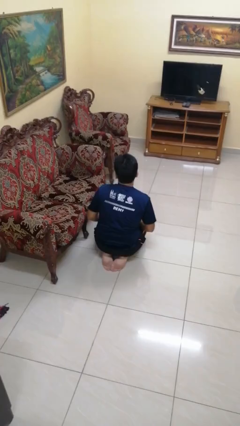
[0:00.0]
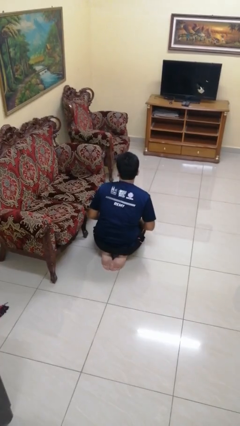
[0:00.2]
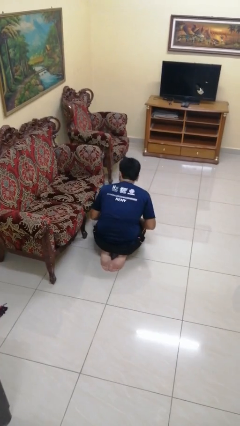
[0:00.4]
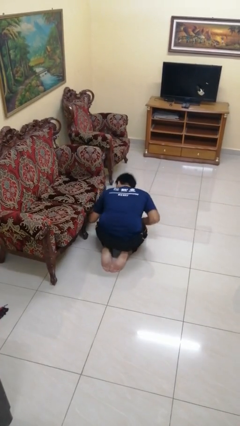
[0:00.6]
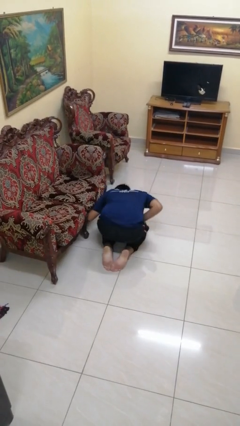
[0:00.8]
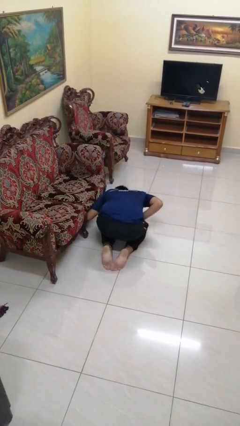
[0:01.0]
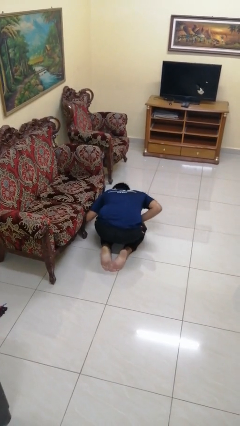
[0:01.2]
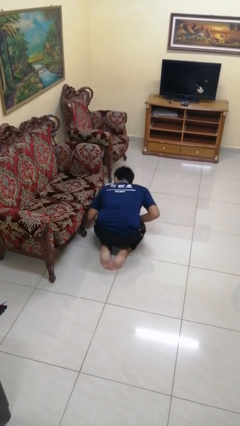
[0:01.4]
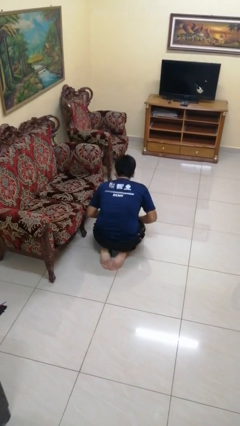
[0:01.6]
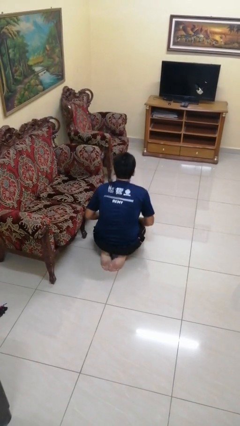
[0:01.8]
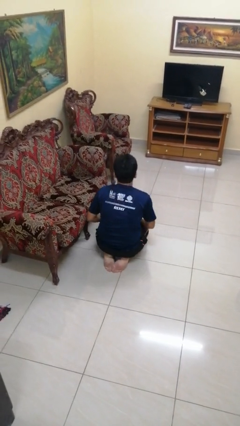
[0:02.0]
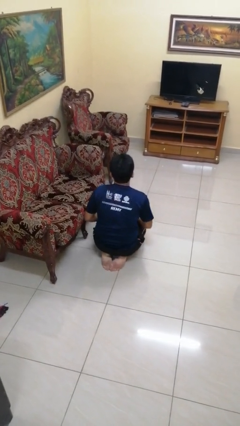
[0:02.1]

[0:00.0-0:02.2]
person searches under couch

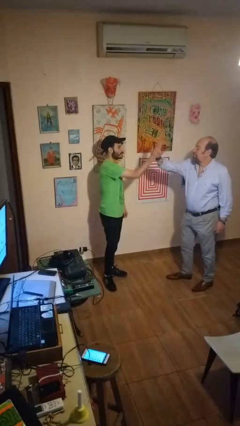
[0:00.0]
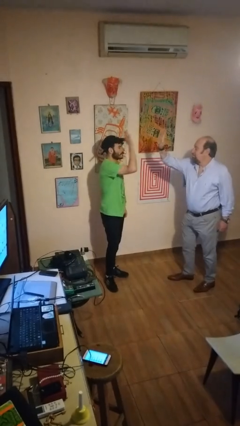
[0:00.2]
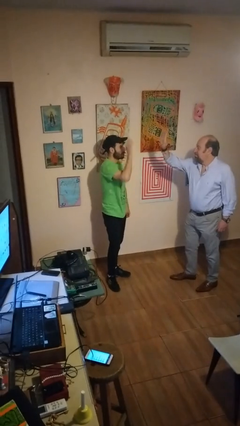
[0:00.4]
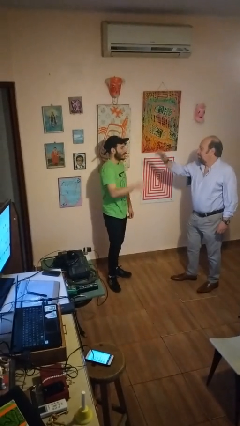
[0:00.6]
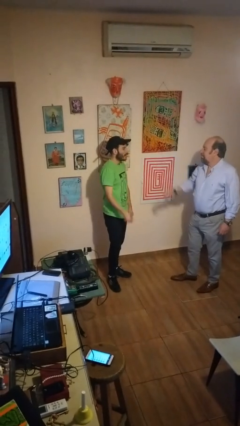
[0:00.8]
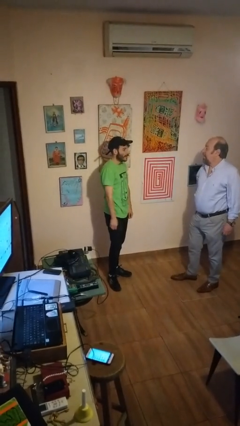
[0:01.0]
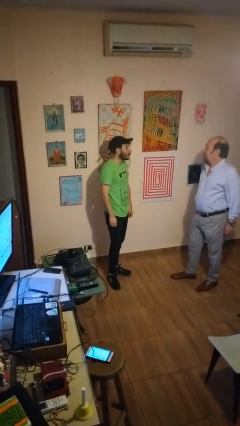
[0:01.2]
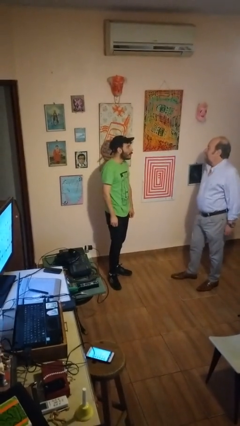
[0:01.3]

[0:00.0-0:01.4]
person highfives hand

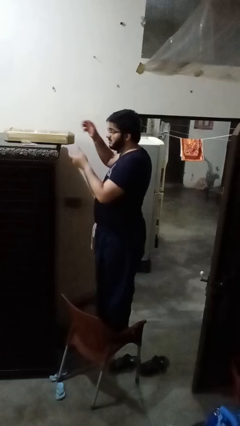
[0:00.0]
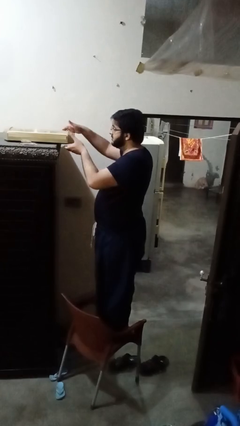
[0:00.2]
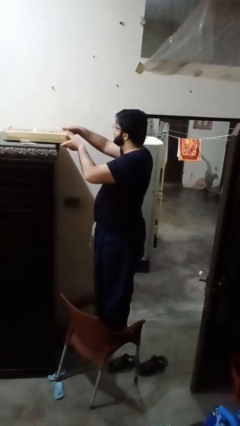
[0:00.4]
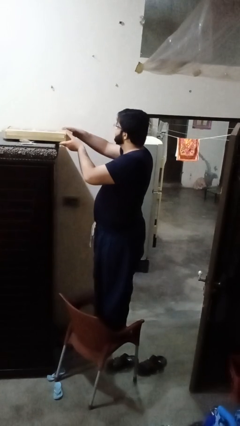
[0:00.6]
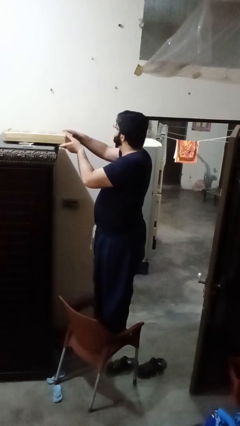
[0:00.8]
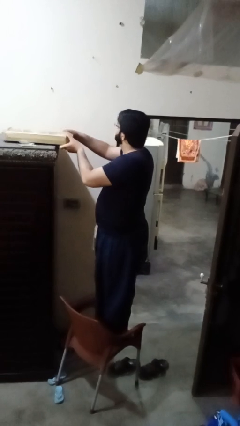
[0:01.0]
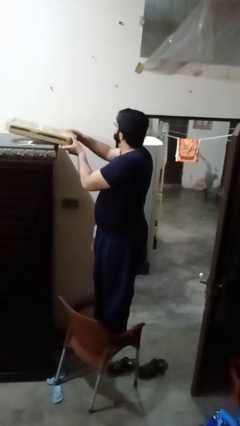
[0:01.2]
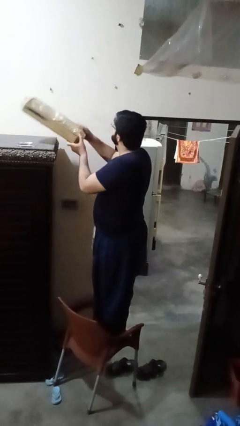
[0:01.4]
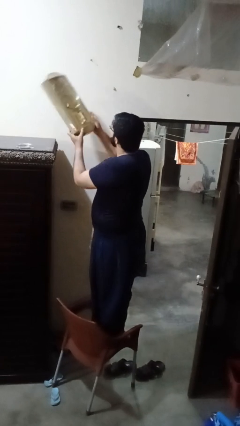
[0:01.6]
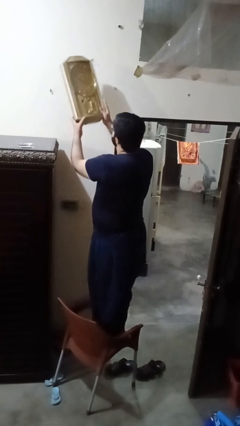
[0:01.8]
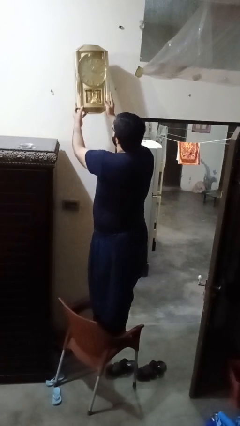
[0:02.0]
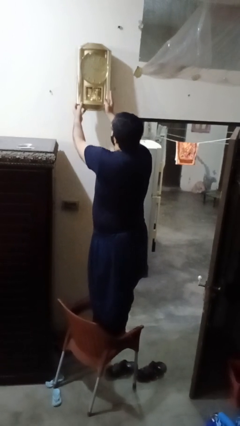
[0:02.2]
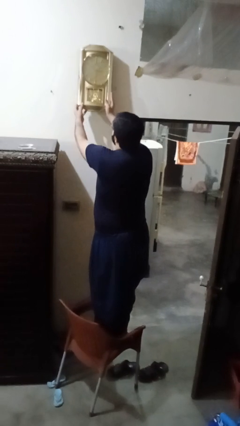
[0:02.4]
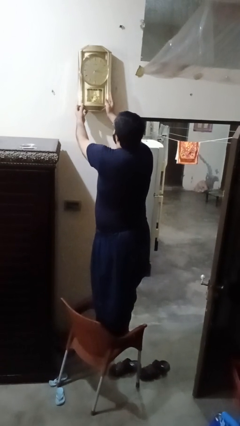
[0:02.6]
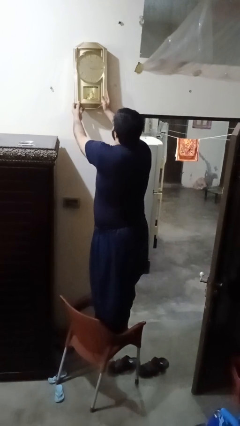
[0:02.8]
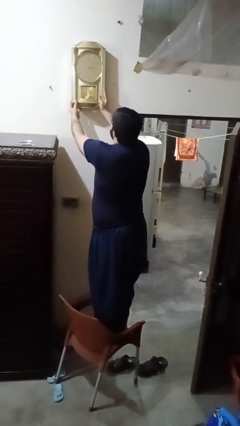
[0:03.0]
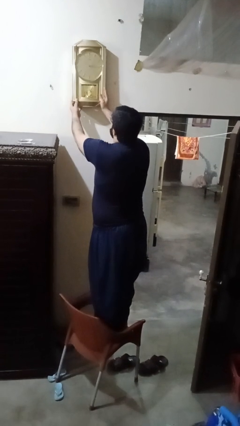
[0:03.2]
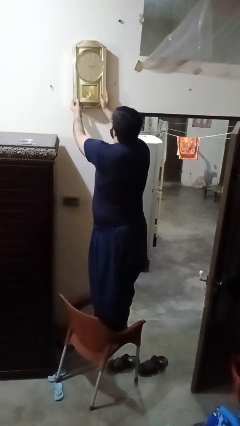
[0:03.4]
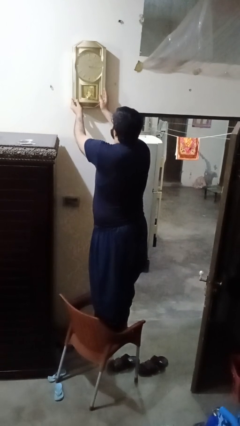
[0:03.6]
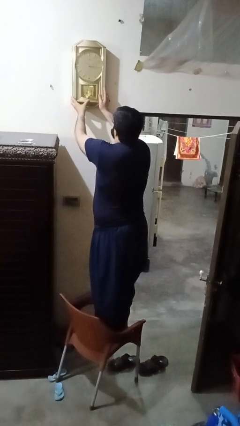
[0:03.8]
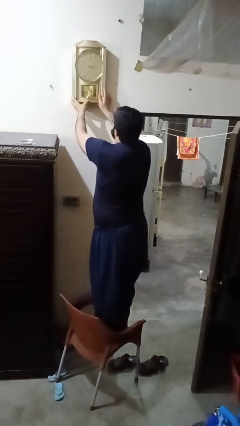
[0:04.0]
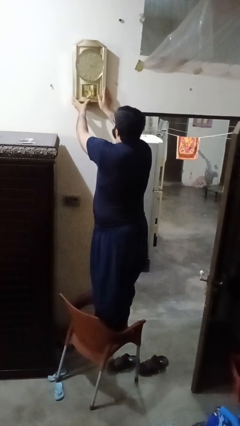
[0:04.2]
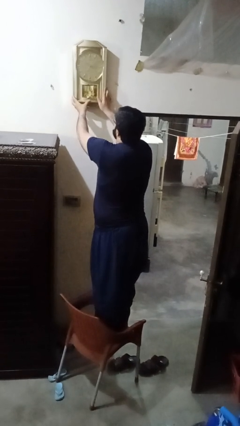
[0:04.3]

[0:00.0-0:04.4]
person puts up smoke detector

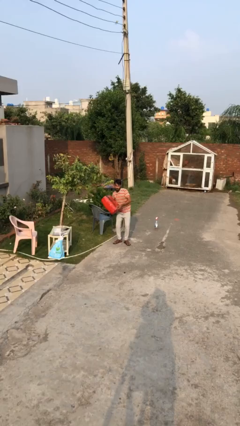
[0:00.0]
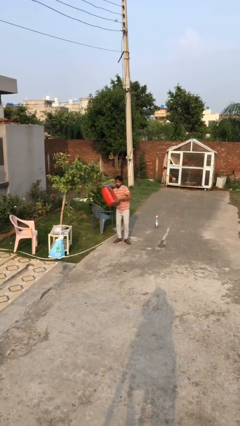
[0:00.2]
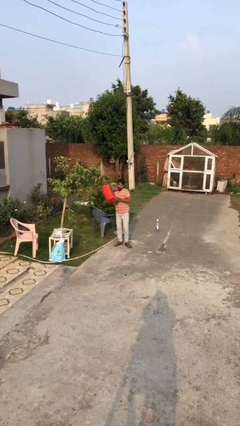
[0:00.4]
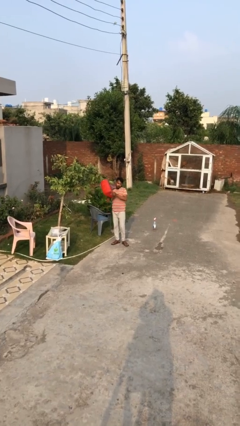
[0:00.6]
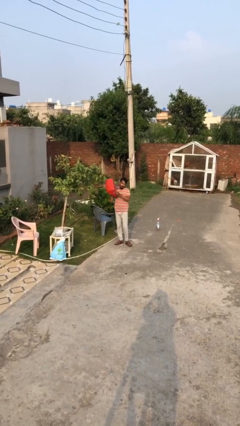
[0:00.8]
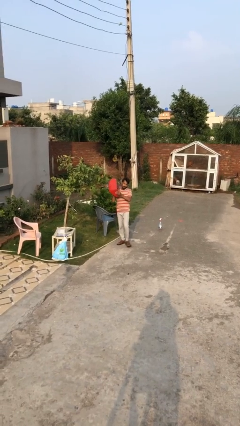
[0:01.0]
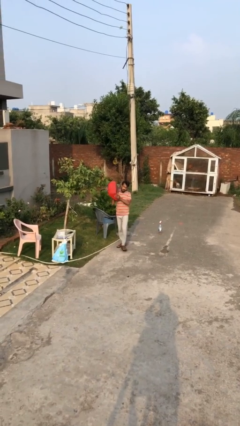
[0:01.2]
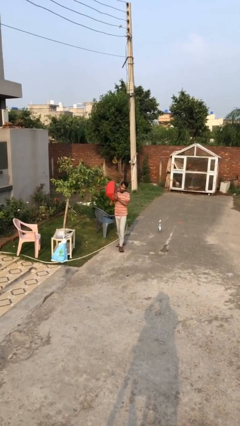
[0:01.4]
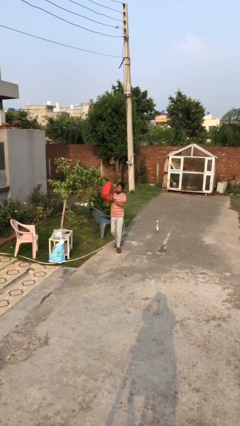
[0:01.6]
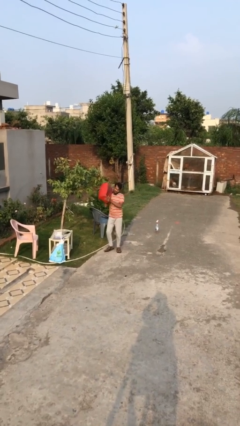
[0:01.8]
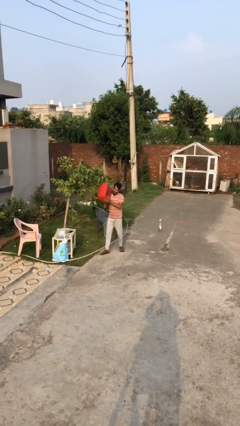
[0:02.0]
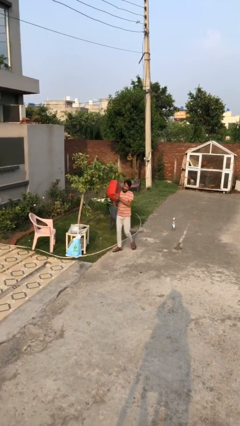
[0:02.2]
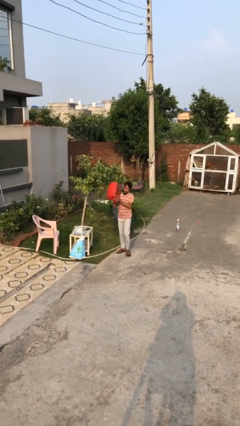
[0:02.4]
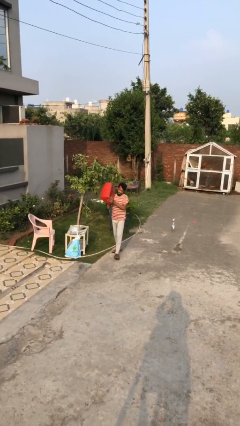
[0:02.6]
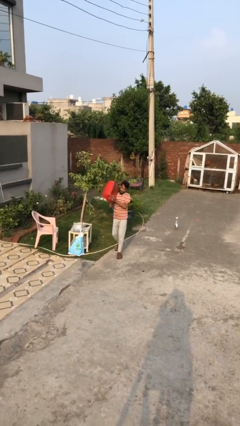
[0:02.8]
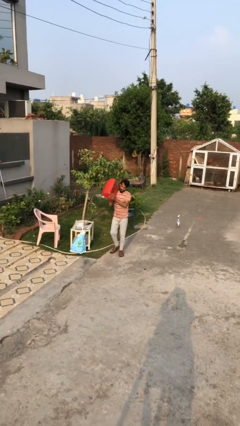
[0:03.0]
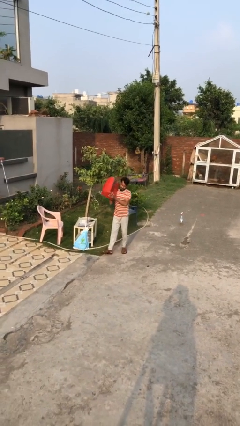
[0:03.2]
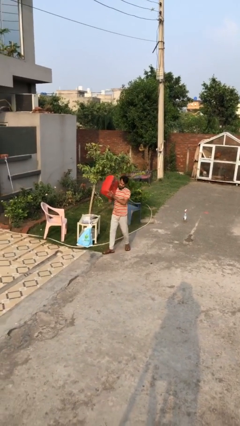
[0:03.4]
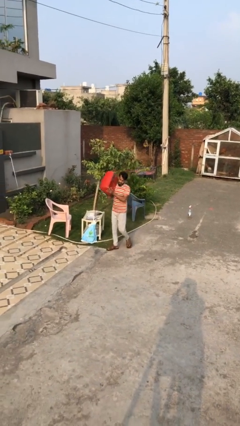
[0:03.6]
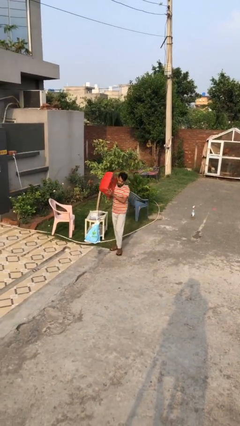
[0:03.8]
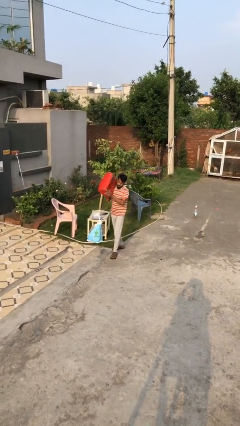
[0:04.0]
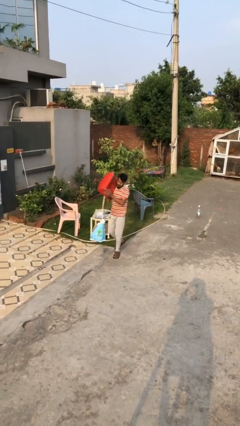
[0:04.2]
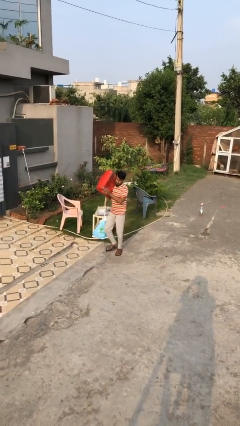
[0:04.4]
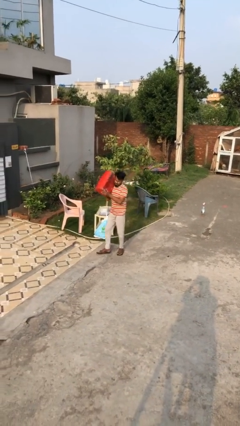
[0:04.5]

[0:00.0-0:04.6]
person carries heavy object

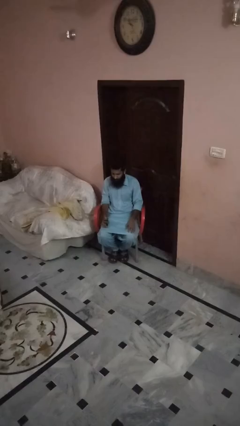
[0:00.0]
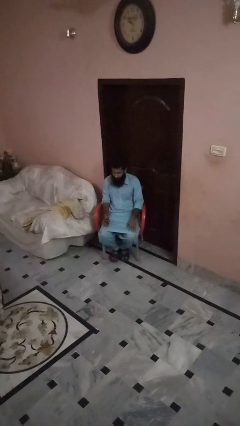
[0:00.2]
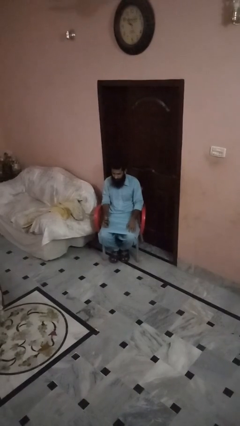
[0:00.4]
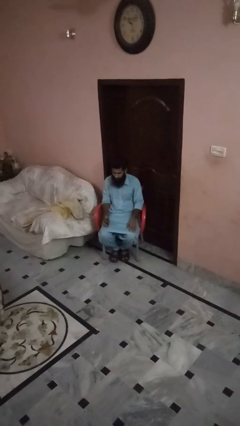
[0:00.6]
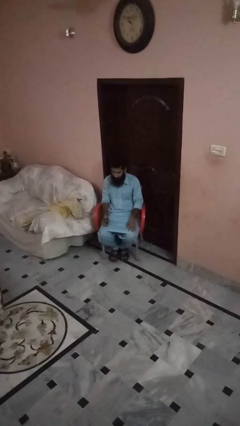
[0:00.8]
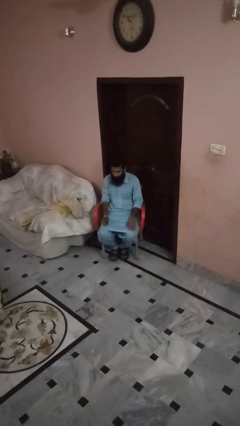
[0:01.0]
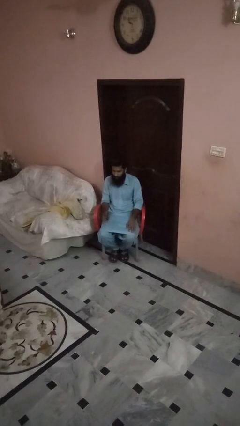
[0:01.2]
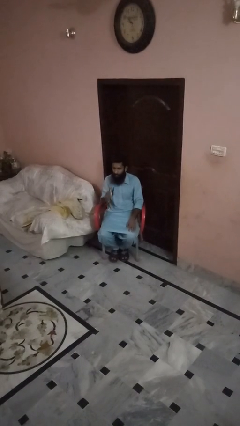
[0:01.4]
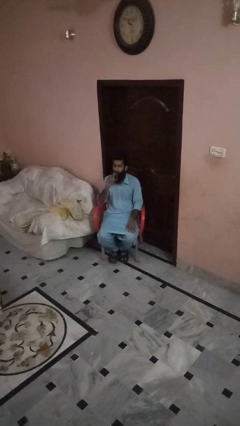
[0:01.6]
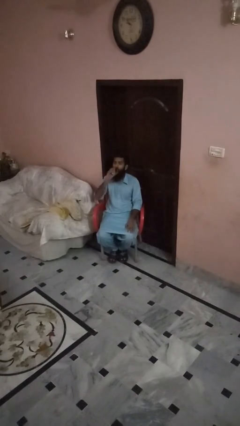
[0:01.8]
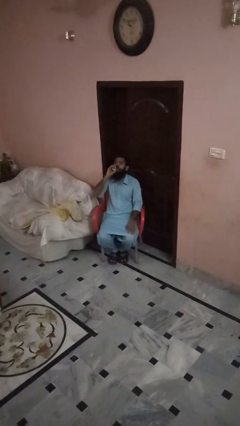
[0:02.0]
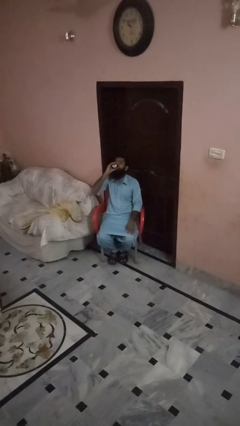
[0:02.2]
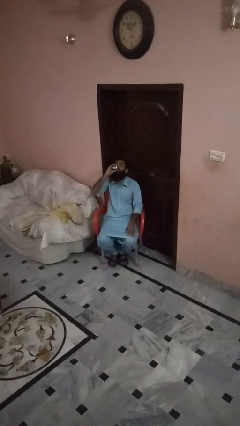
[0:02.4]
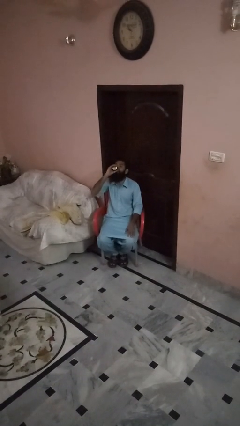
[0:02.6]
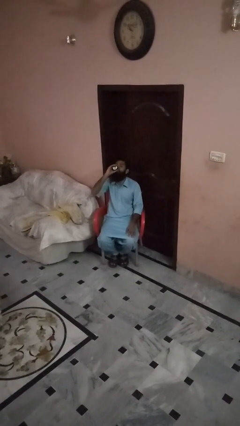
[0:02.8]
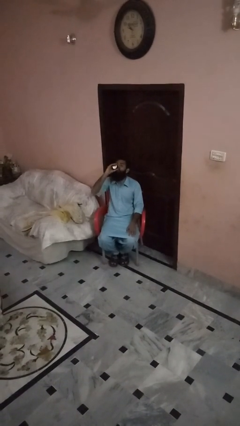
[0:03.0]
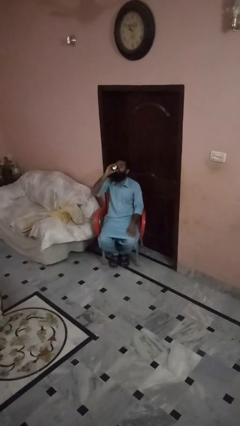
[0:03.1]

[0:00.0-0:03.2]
person drinks from beverage can

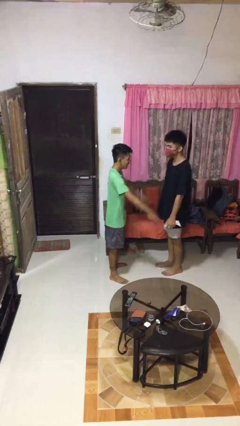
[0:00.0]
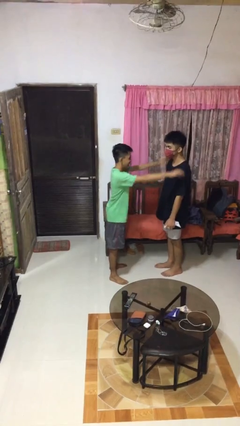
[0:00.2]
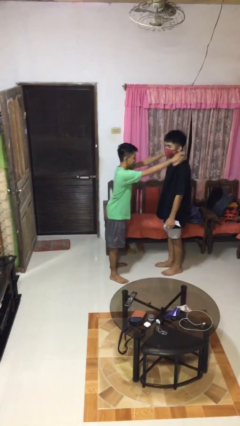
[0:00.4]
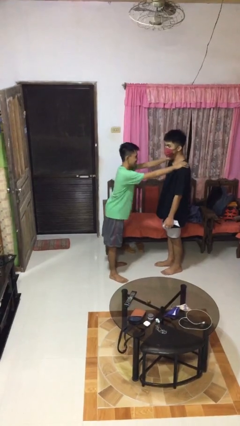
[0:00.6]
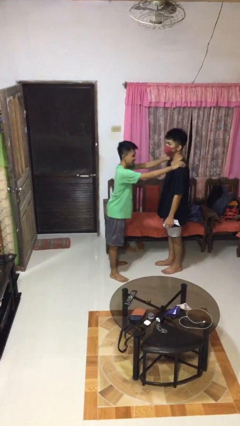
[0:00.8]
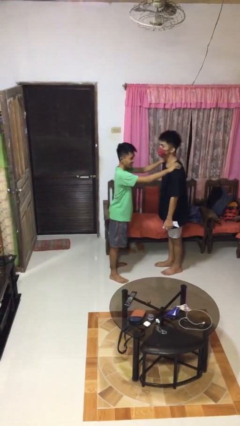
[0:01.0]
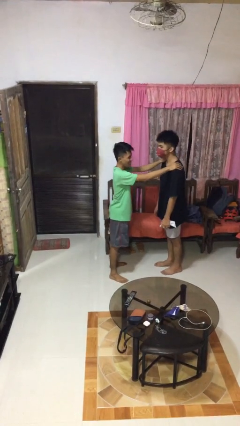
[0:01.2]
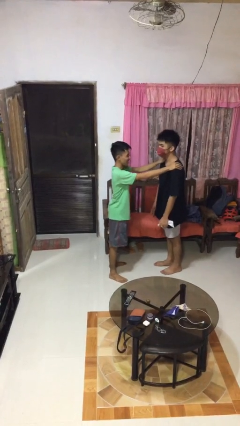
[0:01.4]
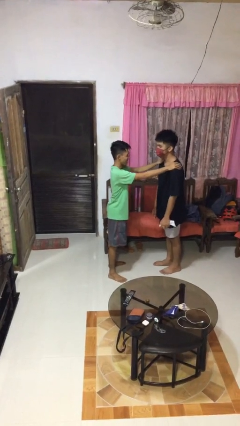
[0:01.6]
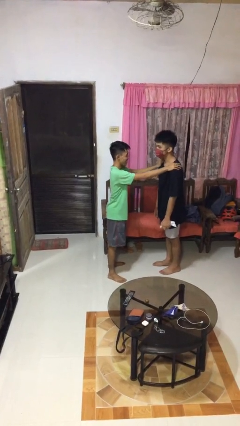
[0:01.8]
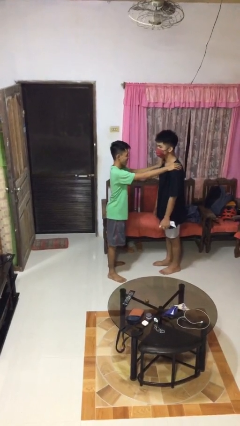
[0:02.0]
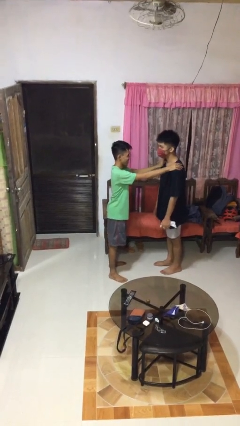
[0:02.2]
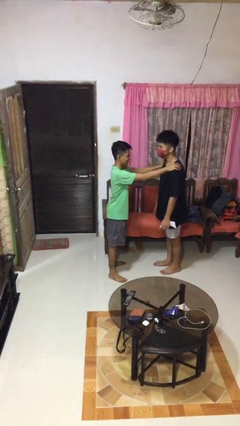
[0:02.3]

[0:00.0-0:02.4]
person grabs person by shoulder
